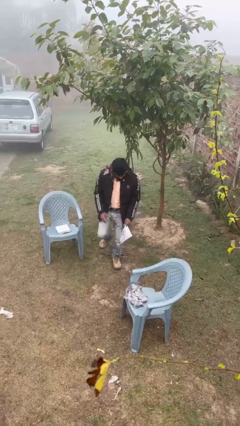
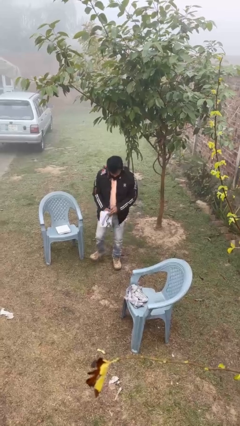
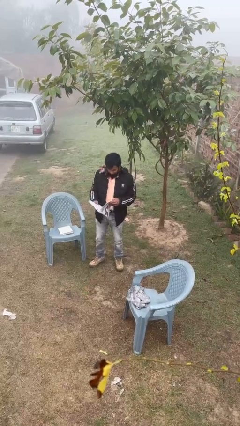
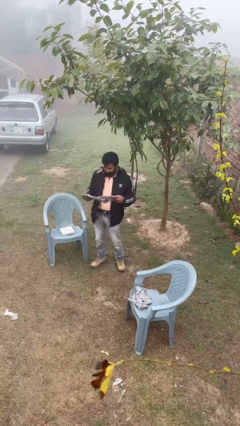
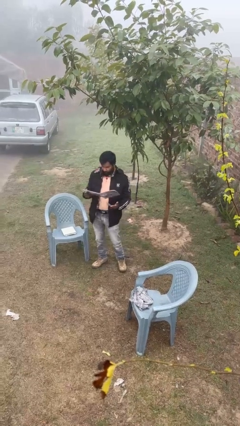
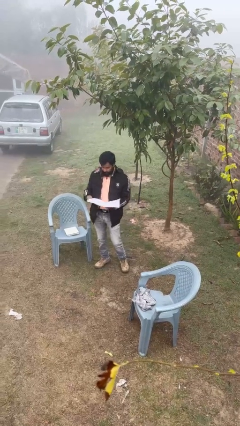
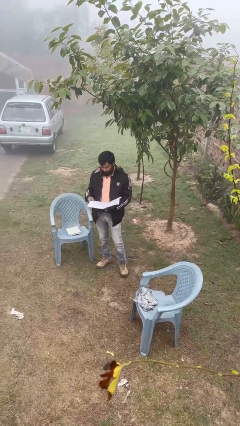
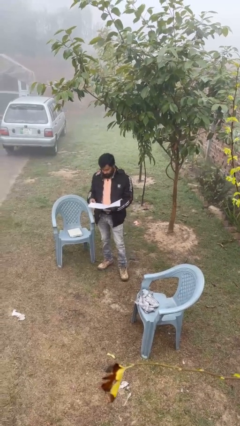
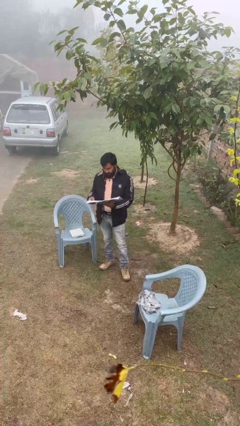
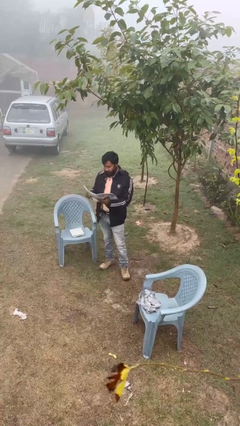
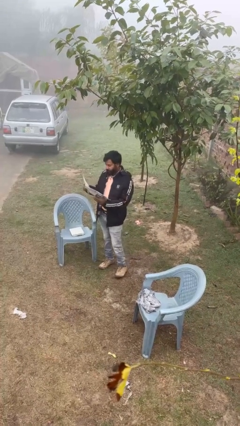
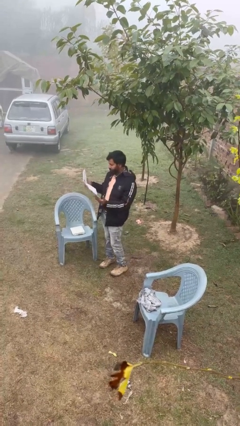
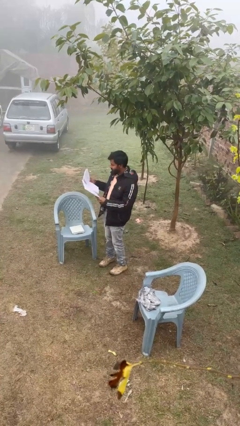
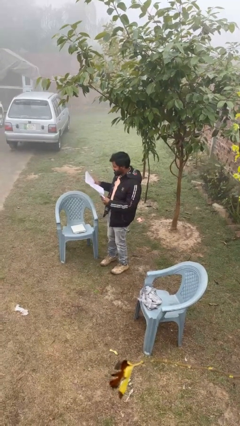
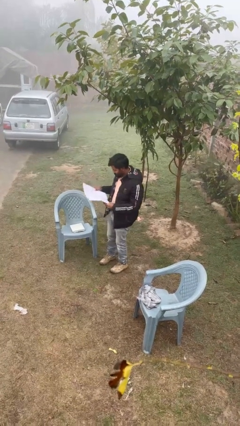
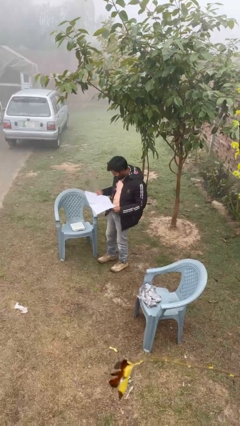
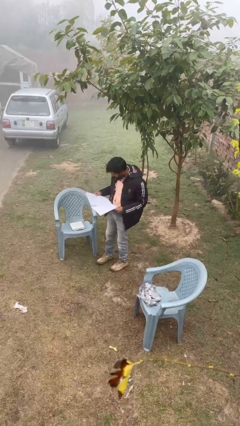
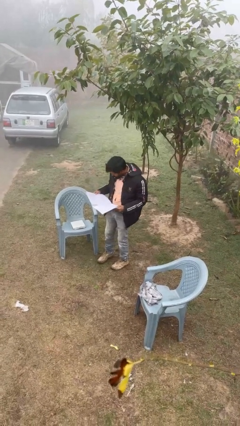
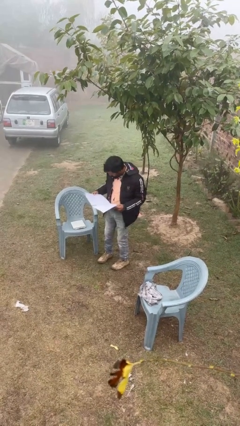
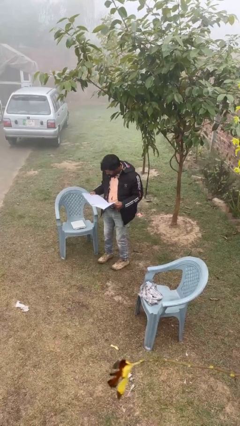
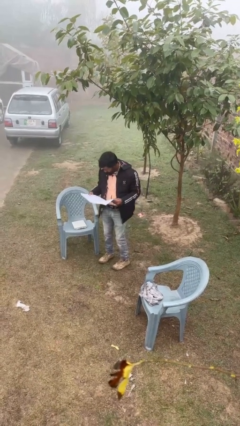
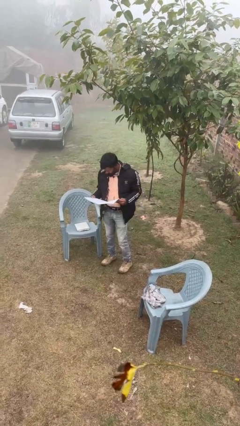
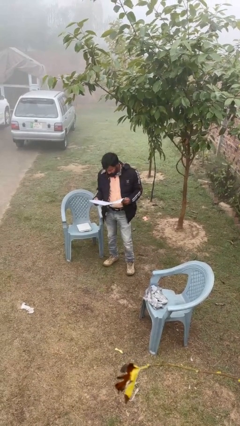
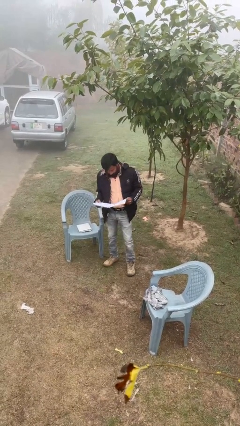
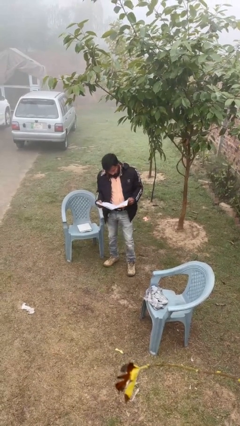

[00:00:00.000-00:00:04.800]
person reads document

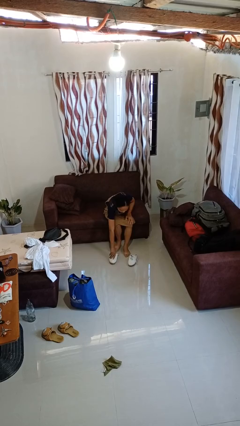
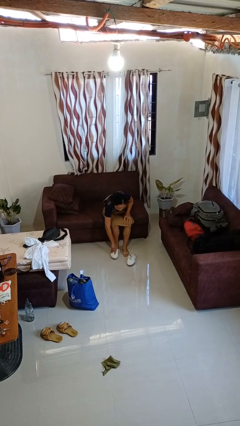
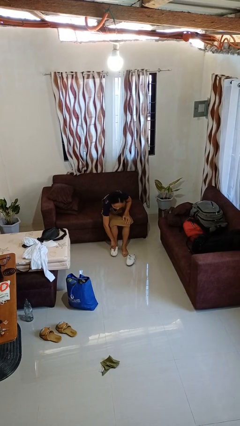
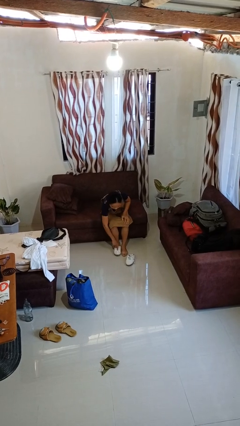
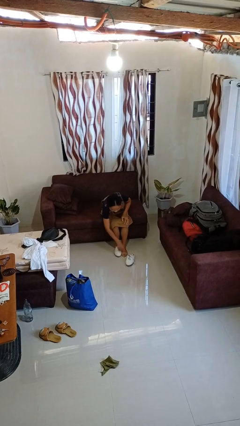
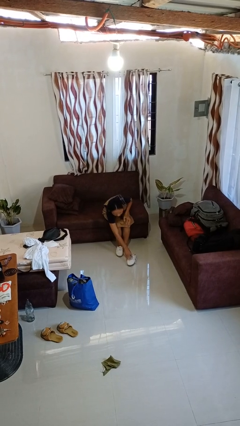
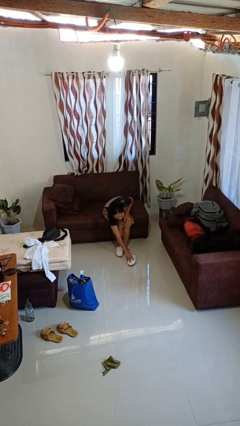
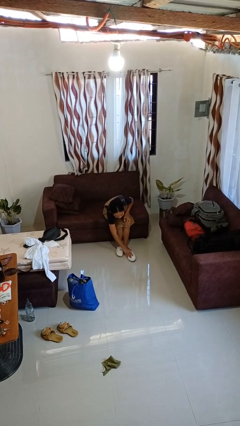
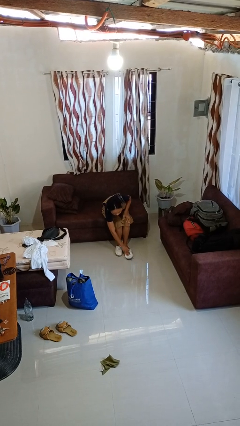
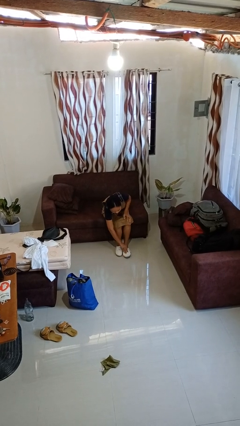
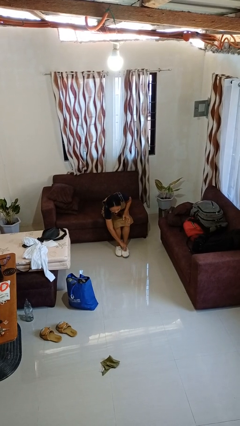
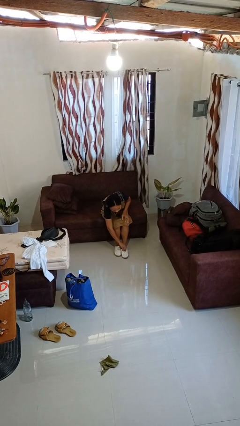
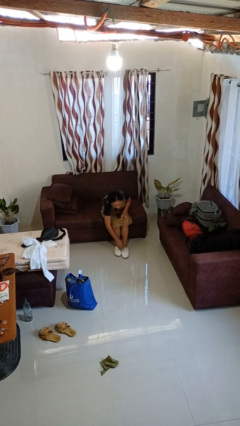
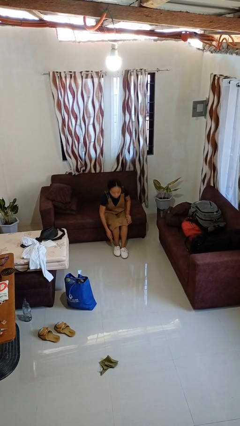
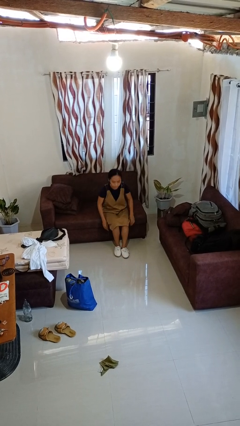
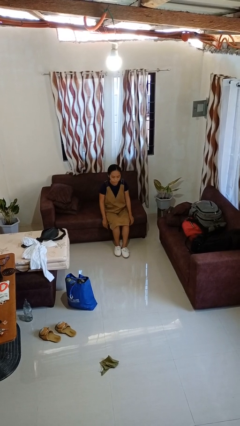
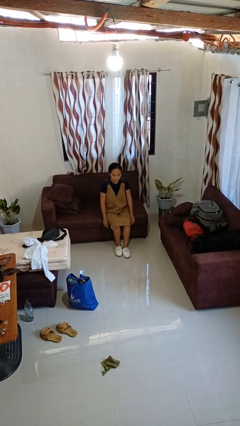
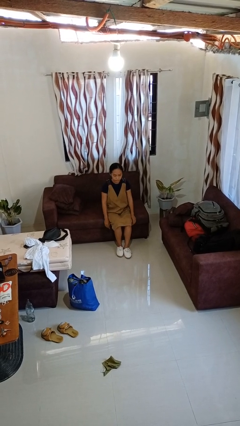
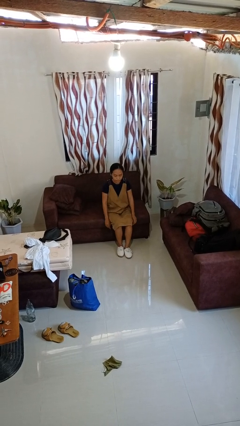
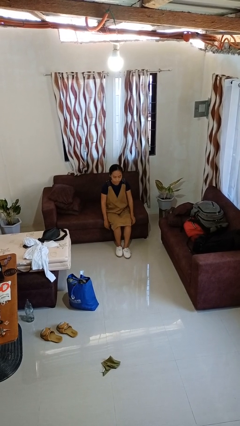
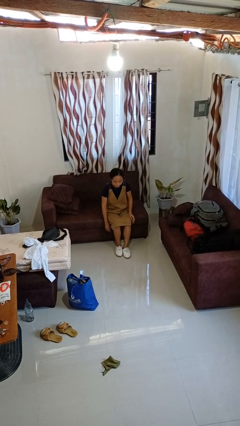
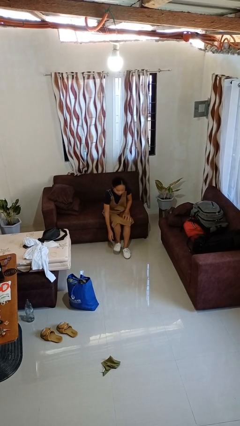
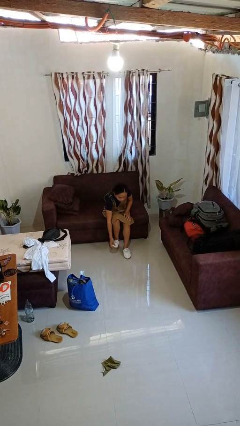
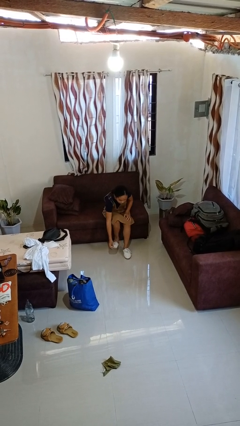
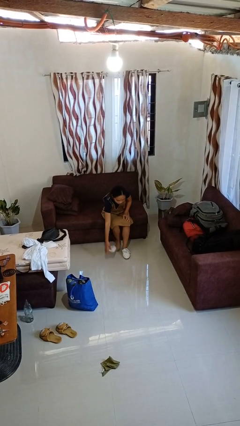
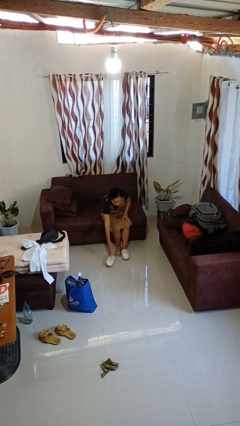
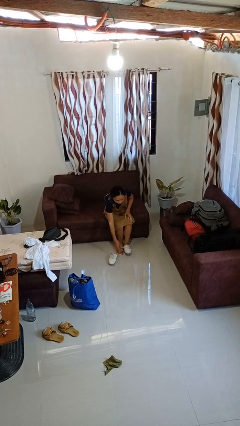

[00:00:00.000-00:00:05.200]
person puts on shoes

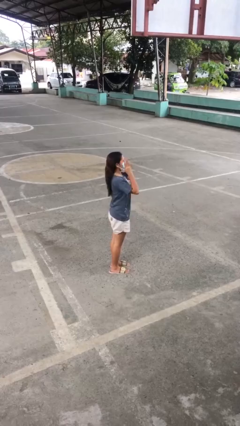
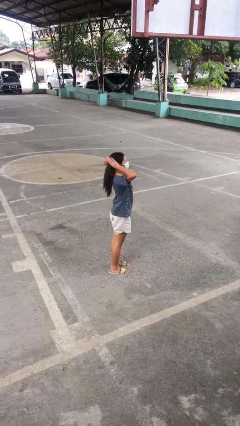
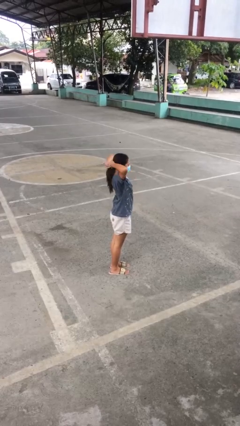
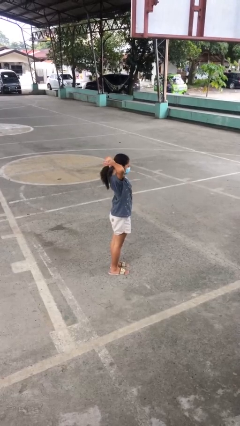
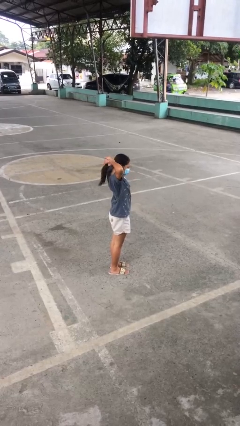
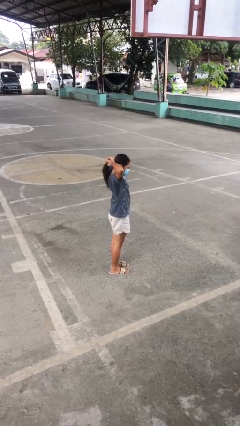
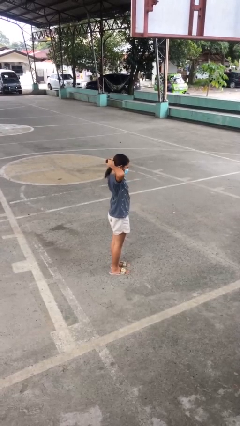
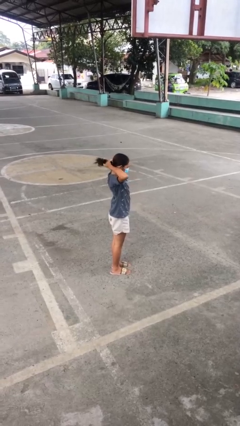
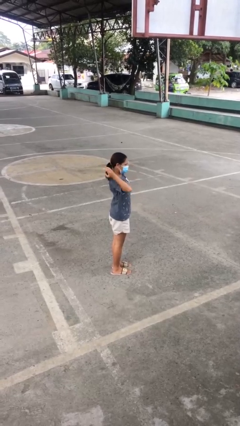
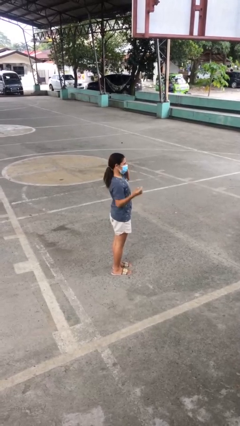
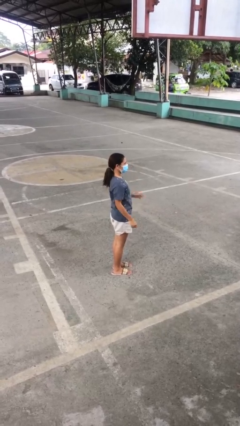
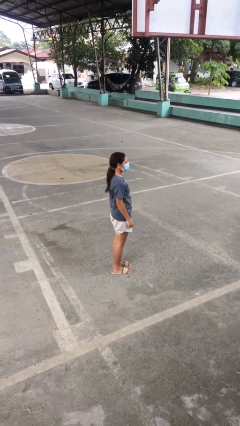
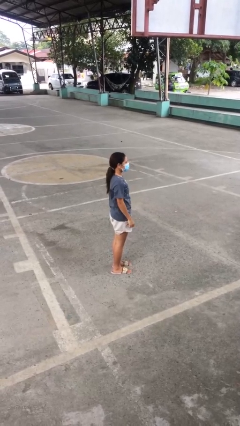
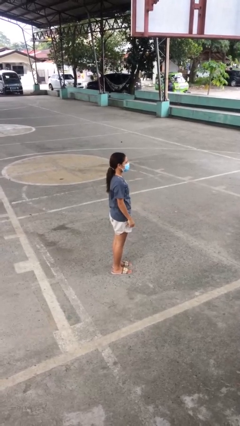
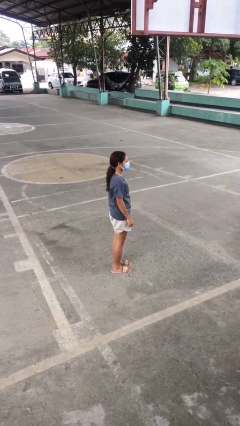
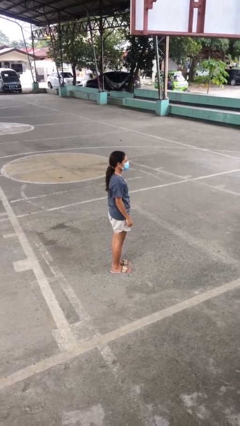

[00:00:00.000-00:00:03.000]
person puts hair in ponytail

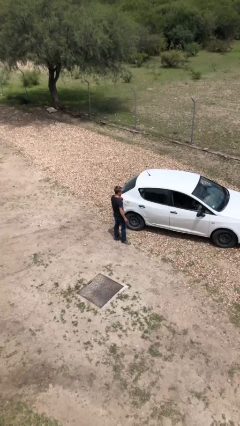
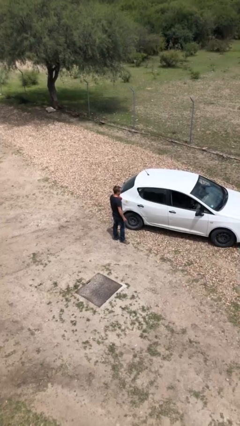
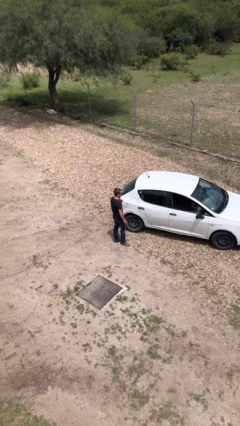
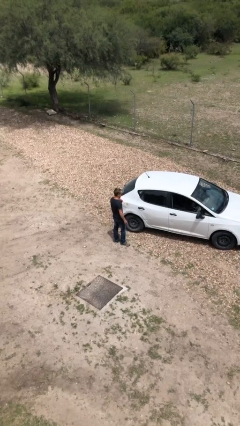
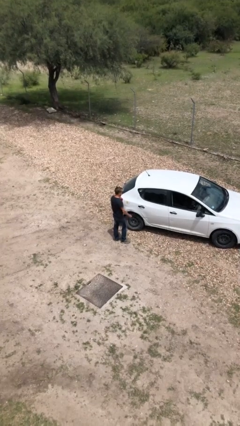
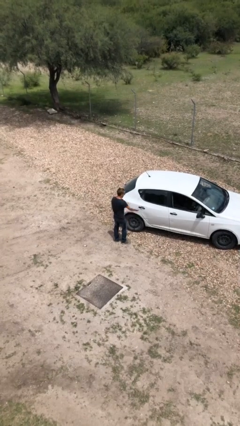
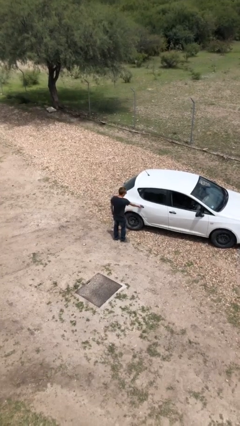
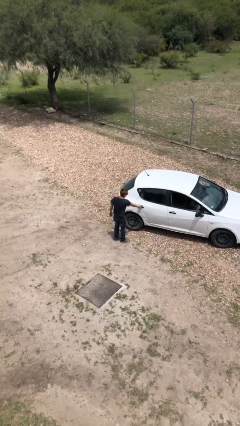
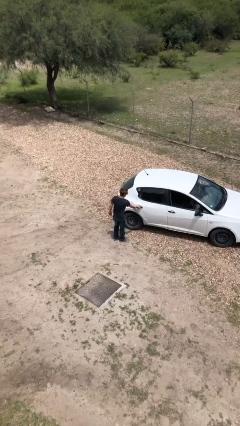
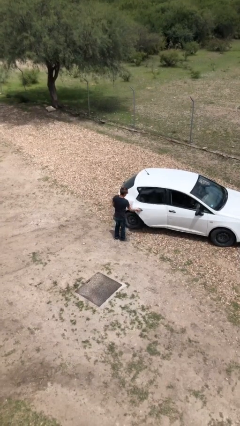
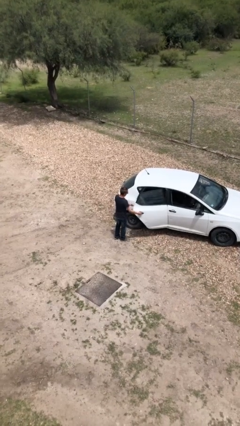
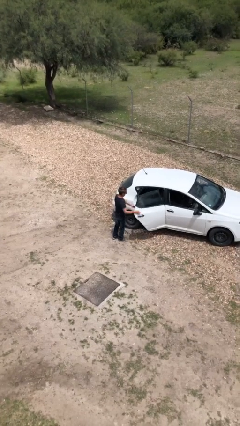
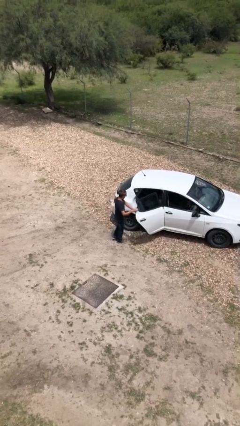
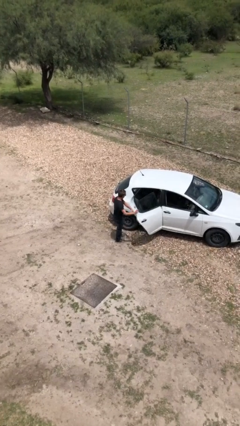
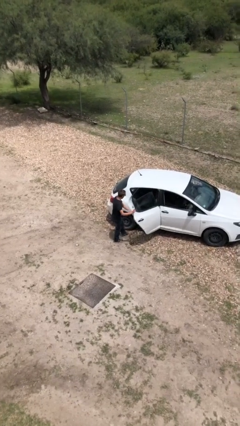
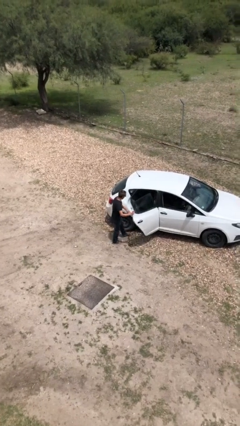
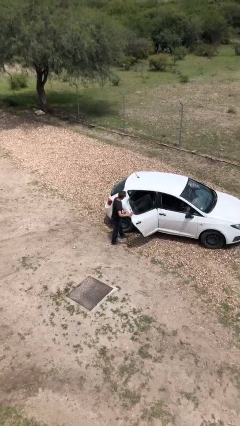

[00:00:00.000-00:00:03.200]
person opens car door

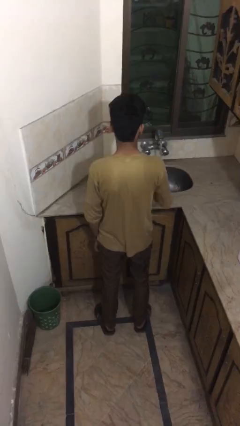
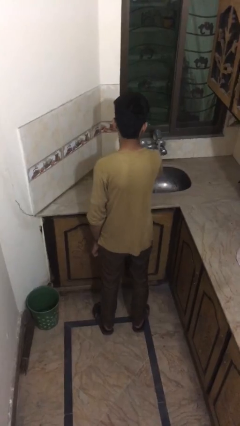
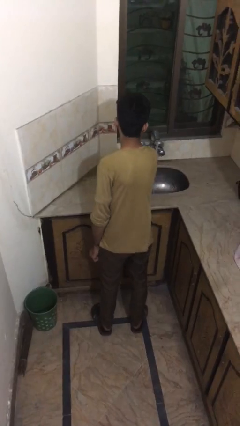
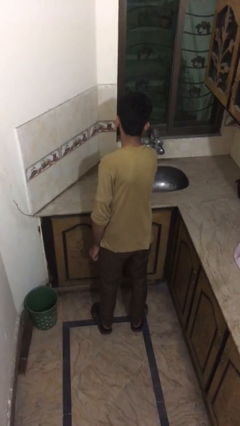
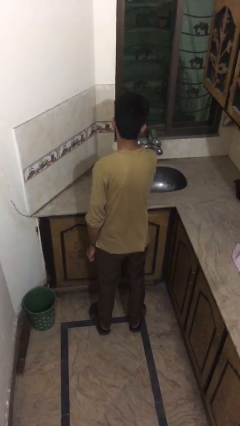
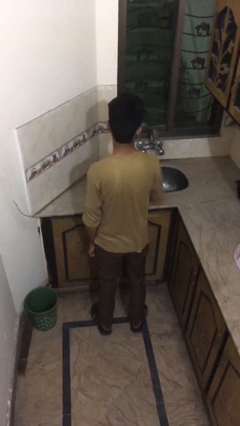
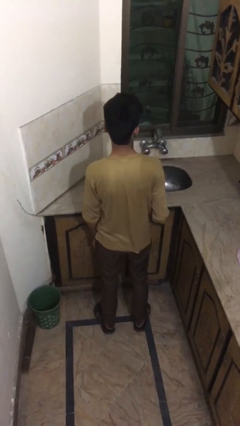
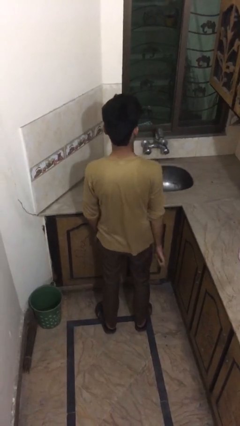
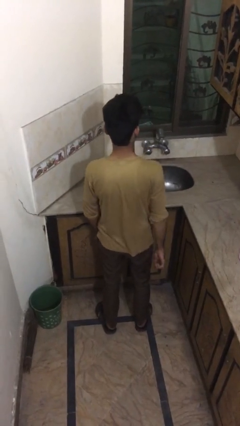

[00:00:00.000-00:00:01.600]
person turns off faucet
